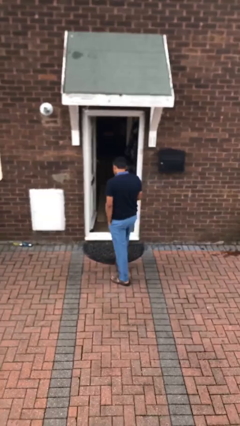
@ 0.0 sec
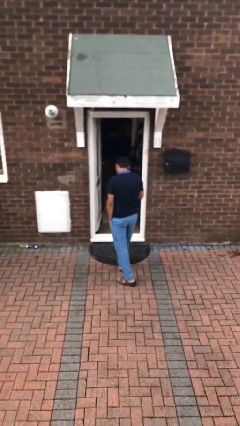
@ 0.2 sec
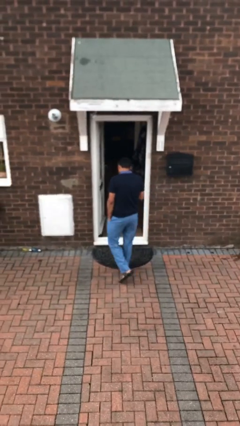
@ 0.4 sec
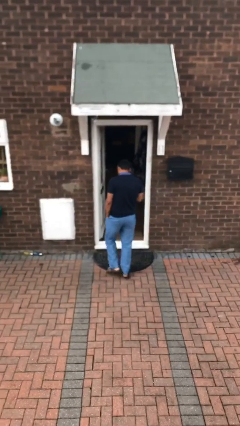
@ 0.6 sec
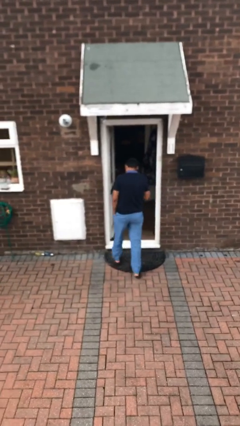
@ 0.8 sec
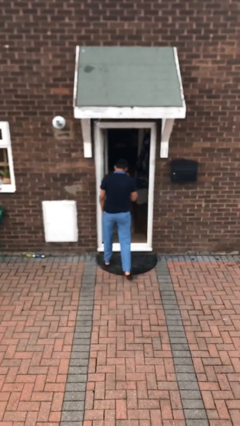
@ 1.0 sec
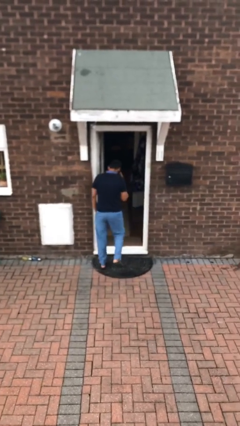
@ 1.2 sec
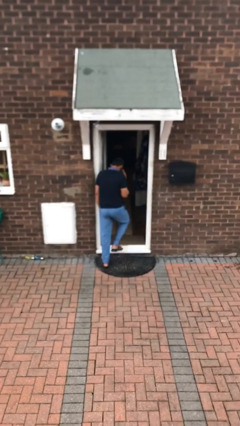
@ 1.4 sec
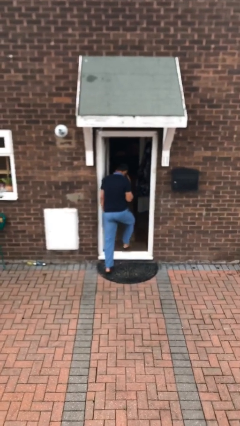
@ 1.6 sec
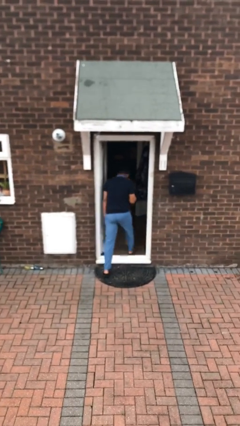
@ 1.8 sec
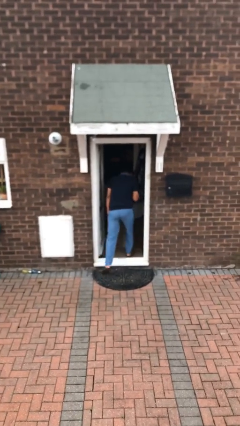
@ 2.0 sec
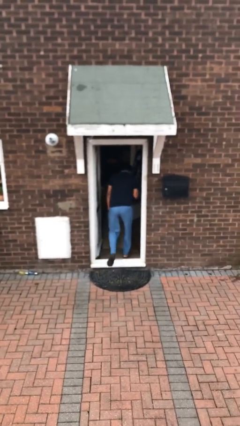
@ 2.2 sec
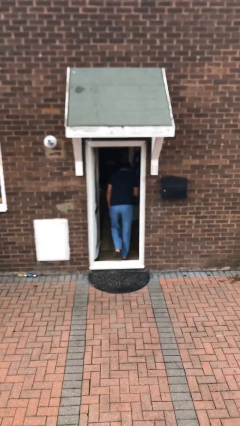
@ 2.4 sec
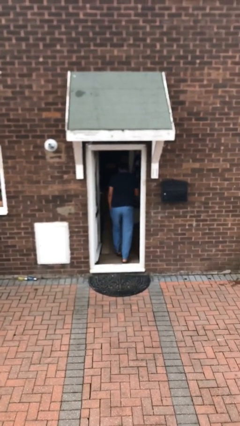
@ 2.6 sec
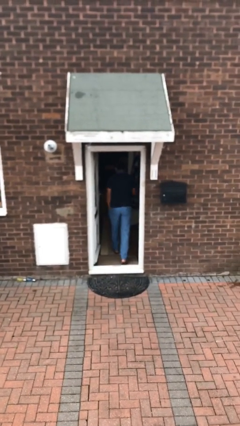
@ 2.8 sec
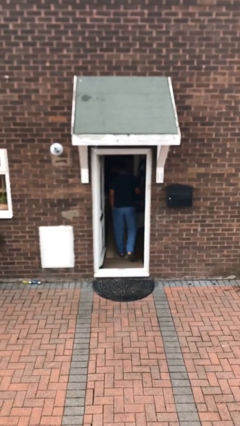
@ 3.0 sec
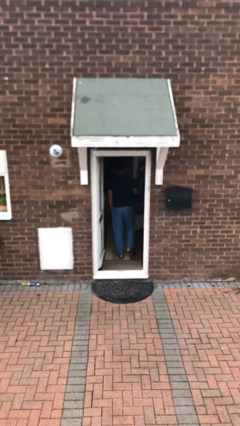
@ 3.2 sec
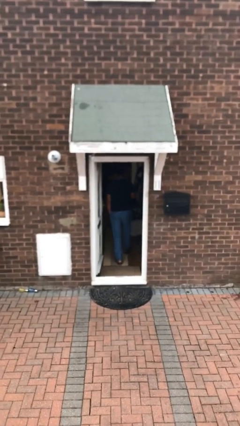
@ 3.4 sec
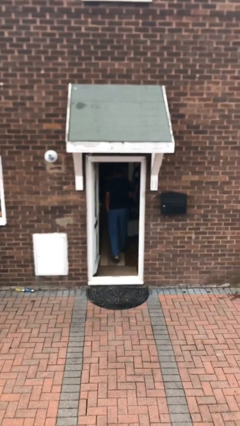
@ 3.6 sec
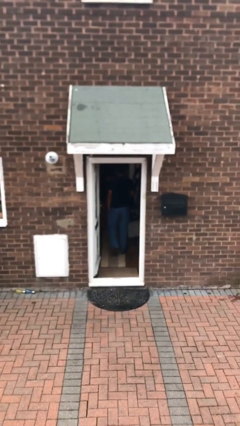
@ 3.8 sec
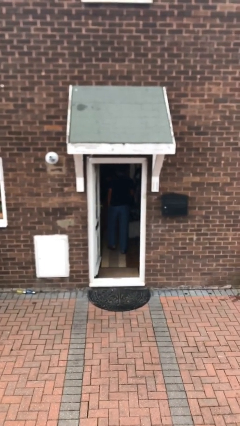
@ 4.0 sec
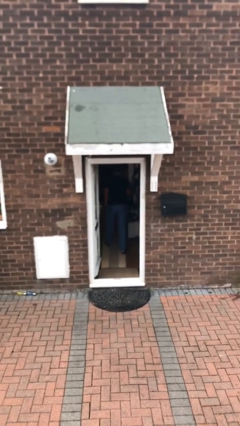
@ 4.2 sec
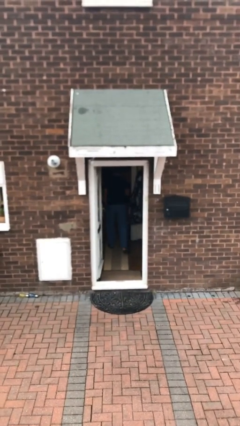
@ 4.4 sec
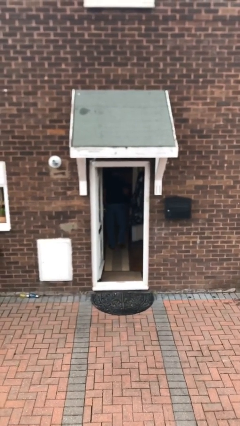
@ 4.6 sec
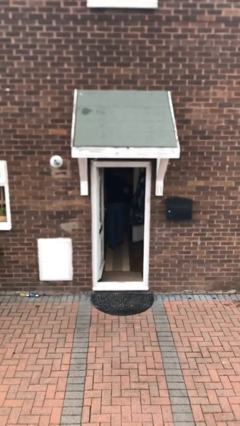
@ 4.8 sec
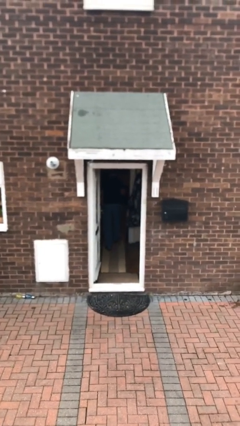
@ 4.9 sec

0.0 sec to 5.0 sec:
person exits scene through structure

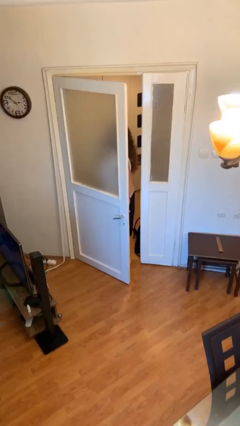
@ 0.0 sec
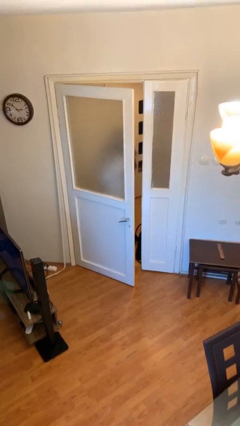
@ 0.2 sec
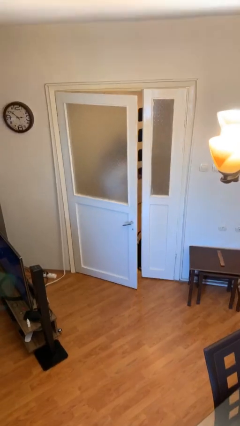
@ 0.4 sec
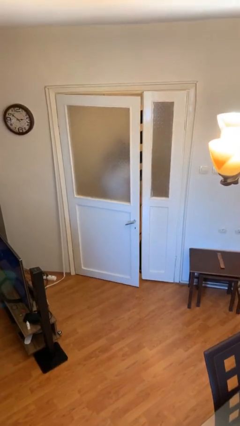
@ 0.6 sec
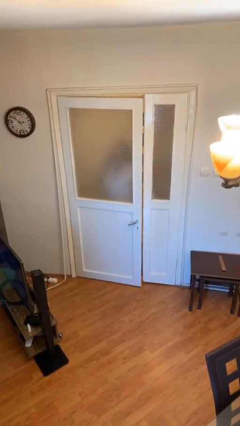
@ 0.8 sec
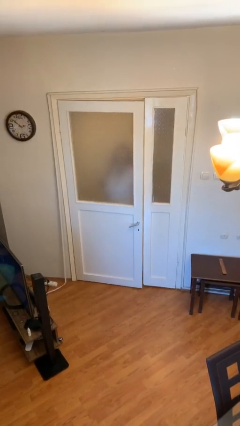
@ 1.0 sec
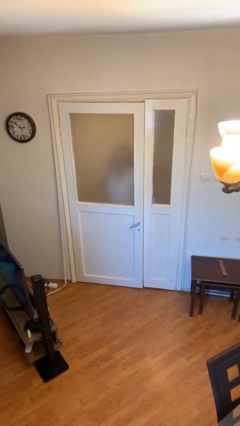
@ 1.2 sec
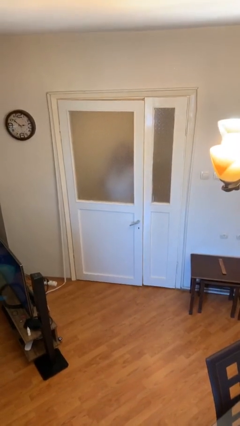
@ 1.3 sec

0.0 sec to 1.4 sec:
person closes facility door

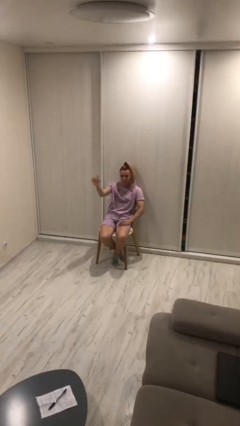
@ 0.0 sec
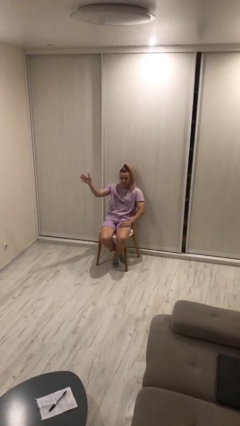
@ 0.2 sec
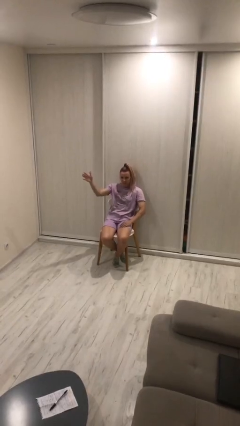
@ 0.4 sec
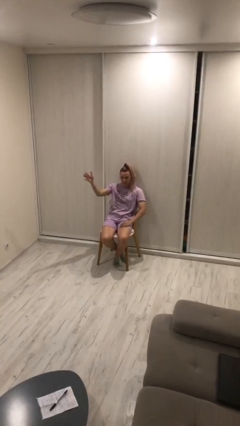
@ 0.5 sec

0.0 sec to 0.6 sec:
person gestures swipe right

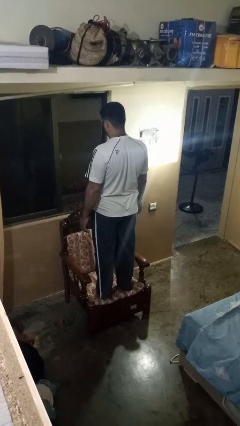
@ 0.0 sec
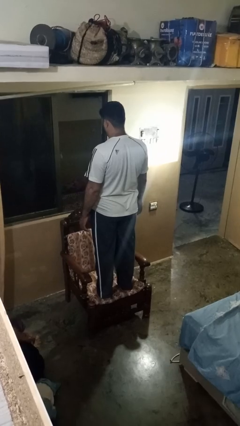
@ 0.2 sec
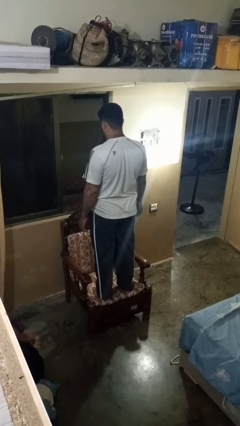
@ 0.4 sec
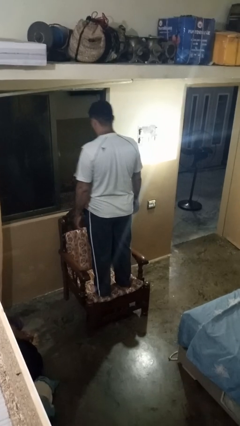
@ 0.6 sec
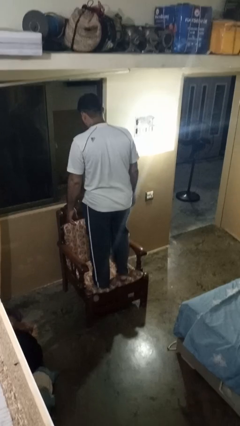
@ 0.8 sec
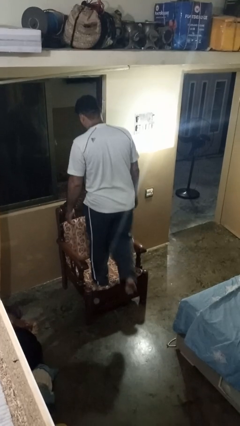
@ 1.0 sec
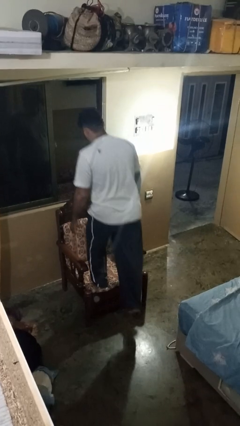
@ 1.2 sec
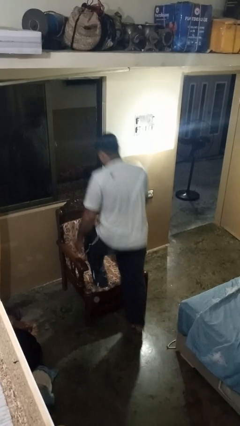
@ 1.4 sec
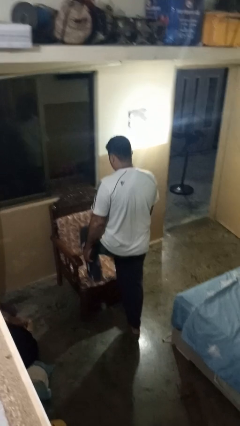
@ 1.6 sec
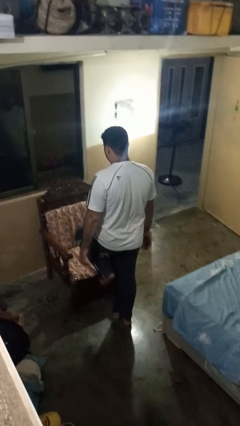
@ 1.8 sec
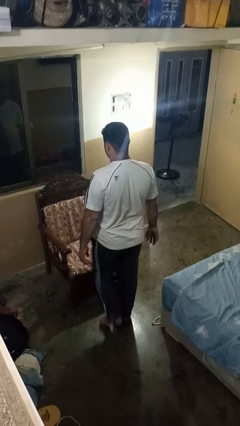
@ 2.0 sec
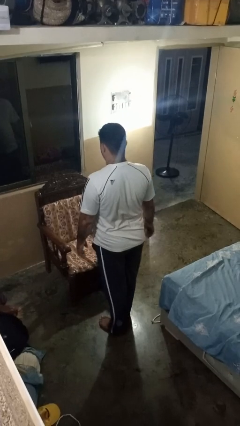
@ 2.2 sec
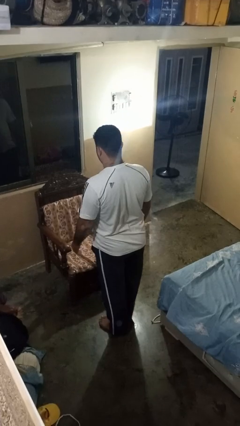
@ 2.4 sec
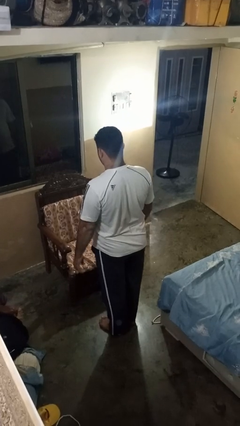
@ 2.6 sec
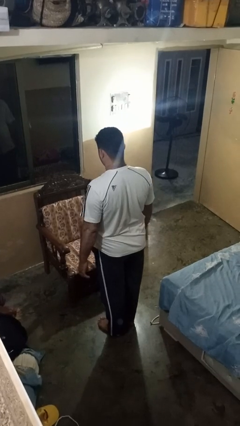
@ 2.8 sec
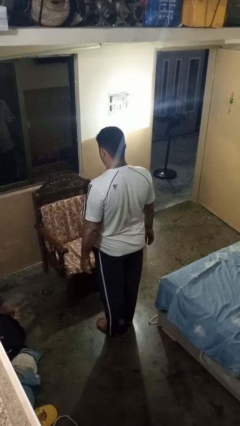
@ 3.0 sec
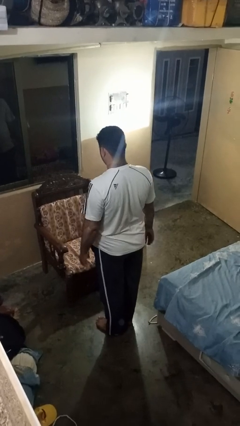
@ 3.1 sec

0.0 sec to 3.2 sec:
person climbs off chair

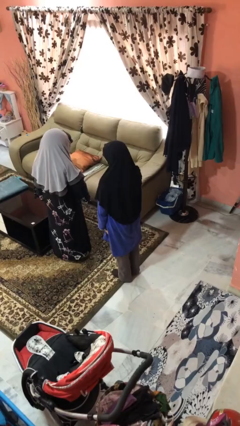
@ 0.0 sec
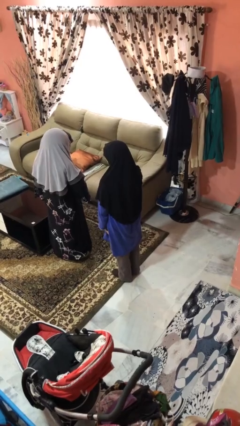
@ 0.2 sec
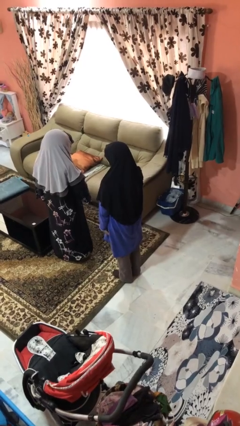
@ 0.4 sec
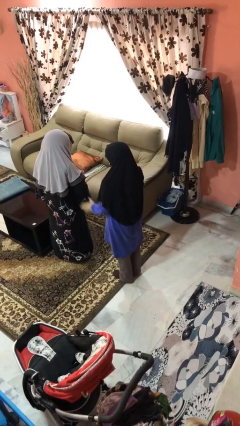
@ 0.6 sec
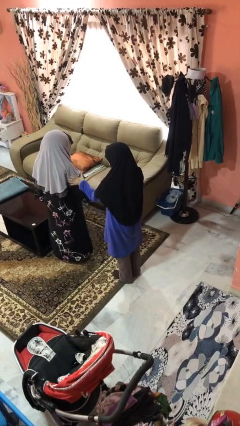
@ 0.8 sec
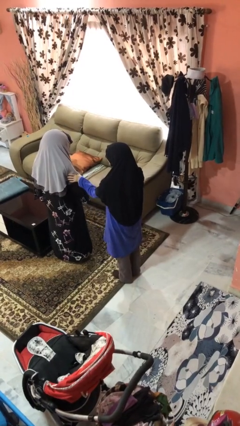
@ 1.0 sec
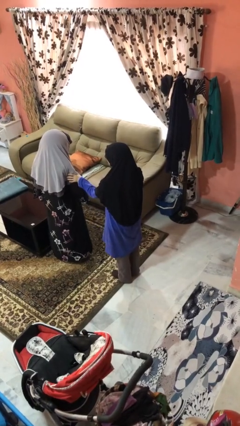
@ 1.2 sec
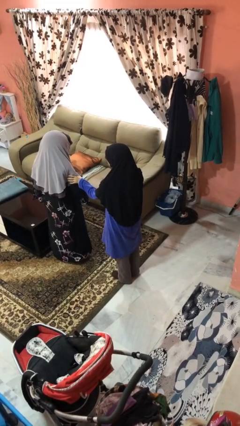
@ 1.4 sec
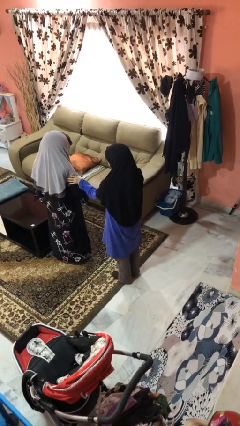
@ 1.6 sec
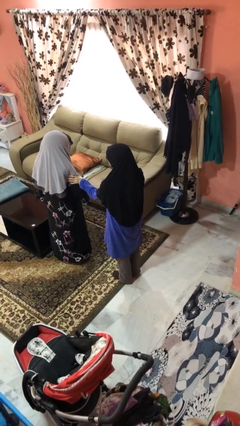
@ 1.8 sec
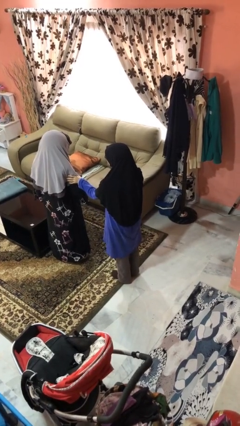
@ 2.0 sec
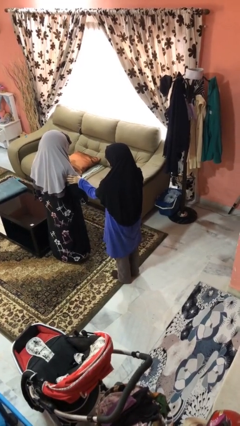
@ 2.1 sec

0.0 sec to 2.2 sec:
person grabs person by bicep

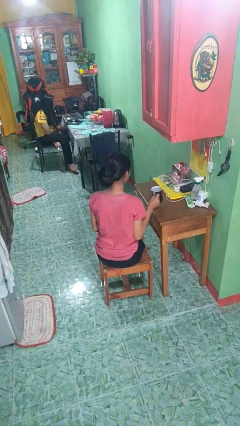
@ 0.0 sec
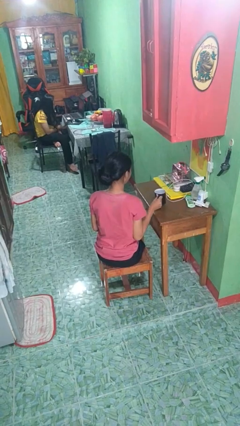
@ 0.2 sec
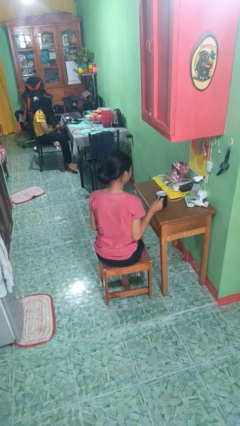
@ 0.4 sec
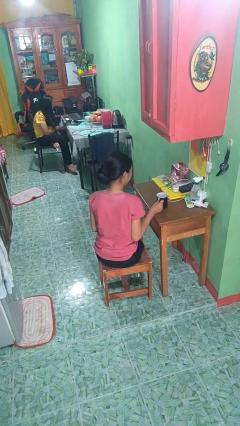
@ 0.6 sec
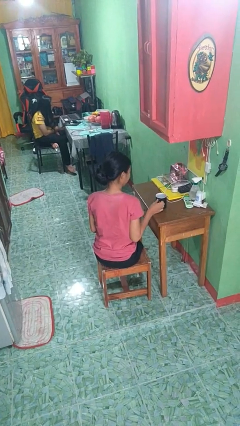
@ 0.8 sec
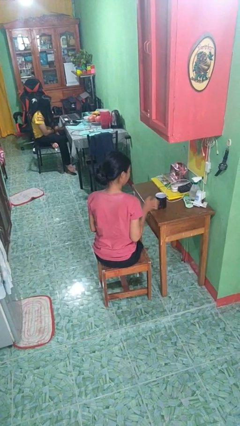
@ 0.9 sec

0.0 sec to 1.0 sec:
person puts down object on table

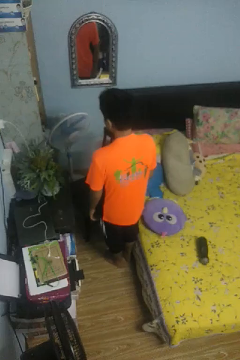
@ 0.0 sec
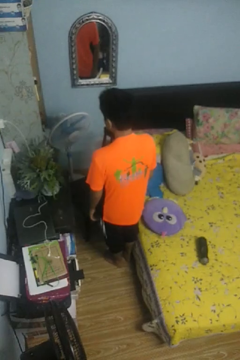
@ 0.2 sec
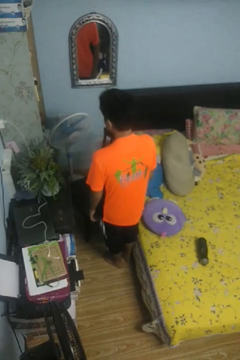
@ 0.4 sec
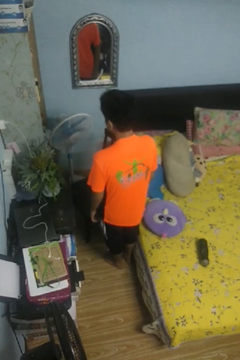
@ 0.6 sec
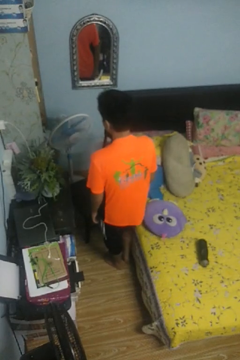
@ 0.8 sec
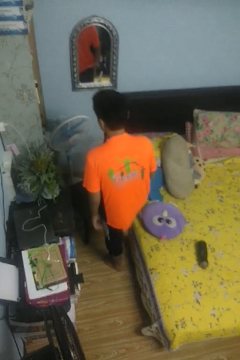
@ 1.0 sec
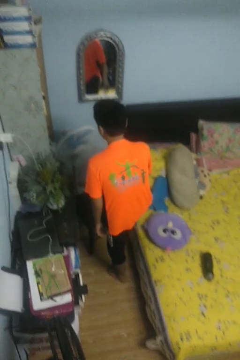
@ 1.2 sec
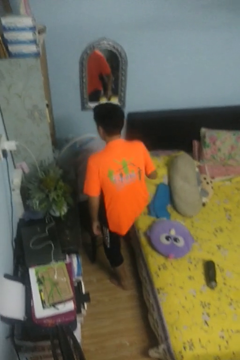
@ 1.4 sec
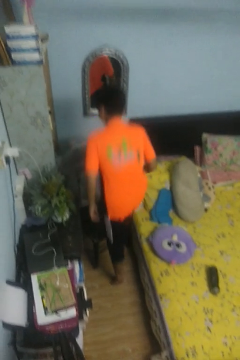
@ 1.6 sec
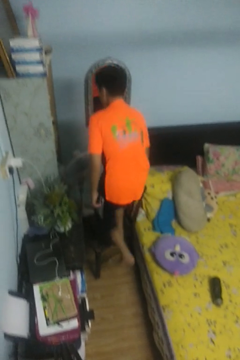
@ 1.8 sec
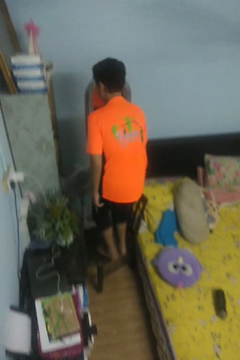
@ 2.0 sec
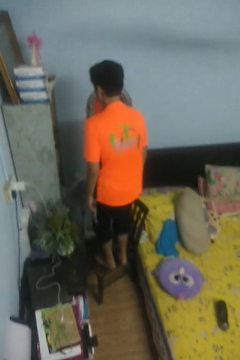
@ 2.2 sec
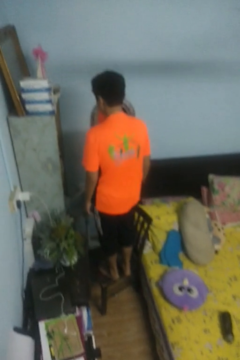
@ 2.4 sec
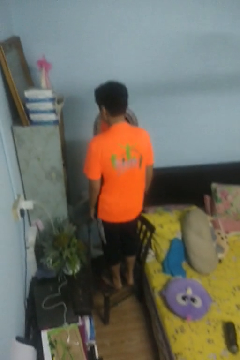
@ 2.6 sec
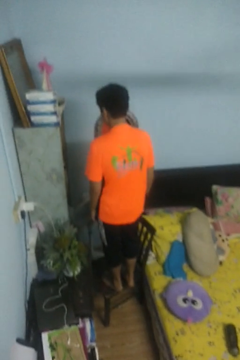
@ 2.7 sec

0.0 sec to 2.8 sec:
person climbs on chair

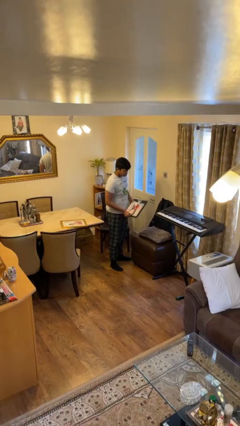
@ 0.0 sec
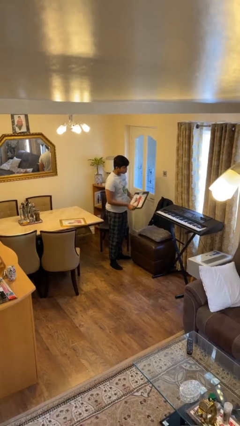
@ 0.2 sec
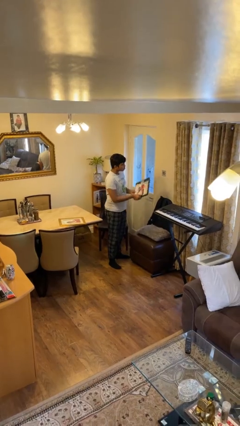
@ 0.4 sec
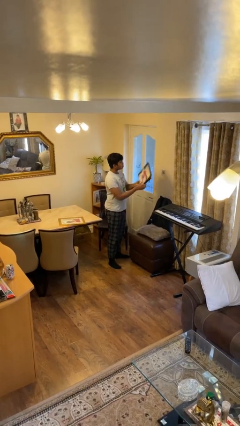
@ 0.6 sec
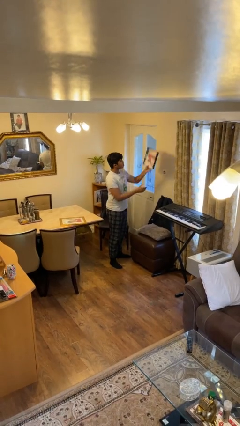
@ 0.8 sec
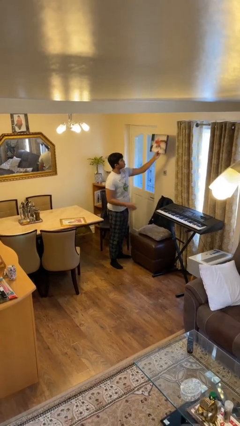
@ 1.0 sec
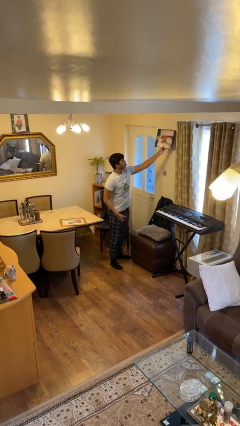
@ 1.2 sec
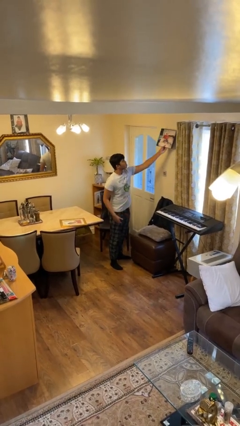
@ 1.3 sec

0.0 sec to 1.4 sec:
person takes down picture frame
